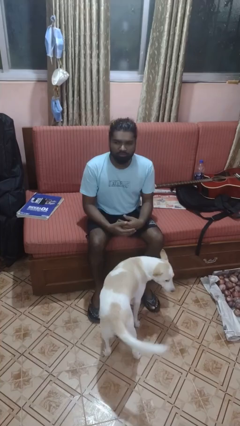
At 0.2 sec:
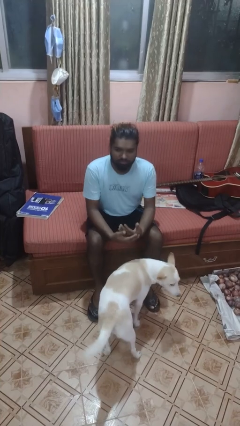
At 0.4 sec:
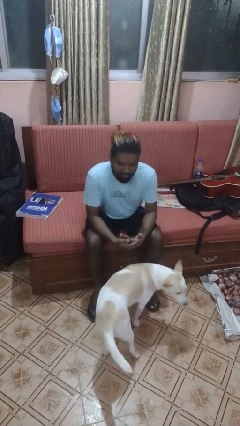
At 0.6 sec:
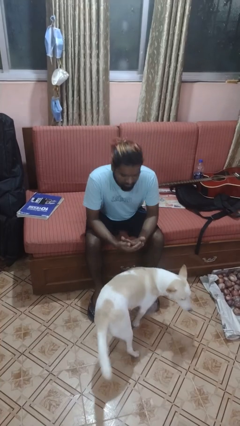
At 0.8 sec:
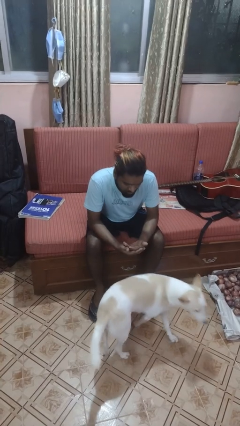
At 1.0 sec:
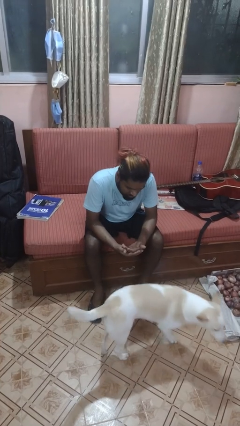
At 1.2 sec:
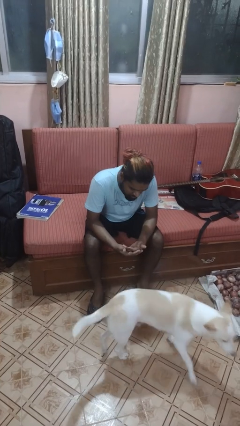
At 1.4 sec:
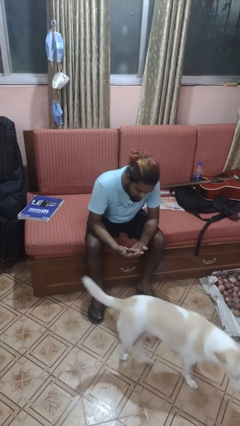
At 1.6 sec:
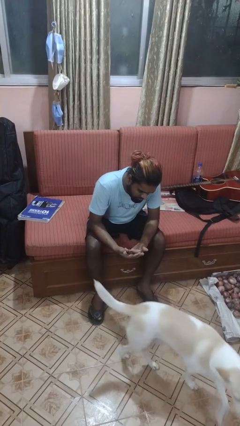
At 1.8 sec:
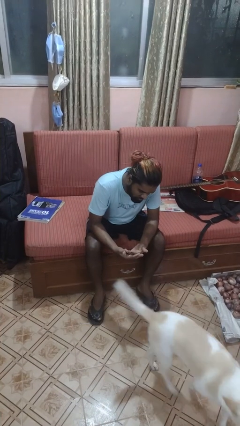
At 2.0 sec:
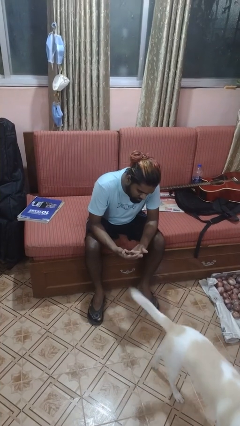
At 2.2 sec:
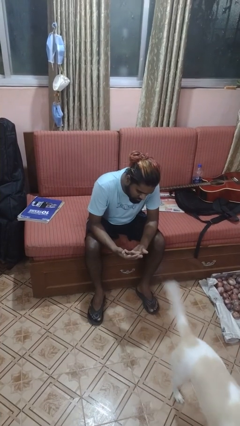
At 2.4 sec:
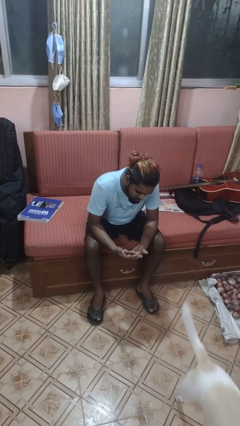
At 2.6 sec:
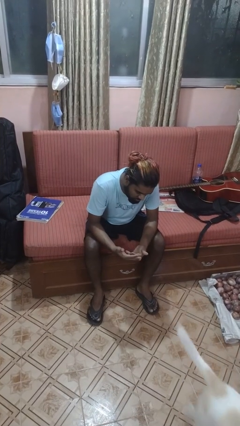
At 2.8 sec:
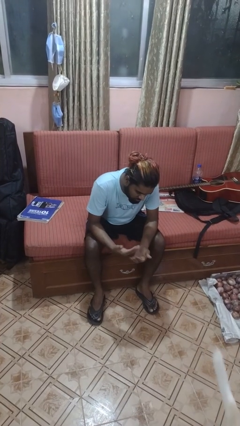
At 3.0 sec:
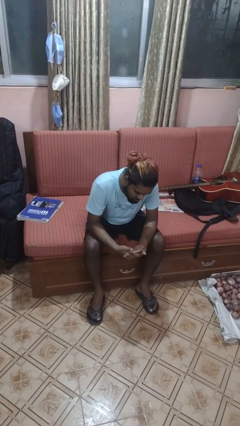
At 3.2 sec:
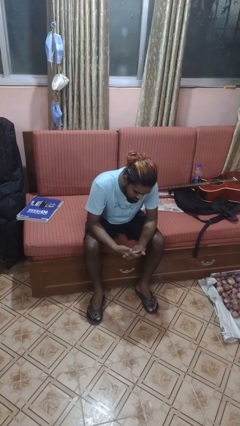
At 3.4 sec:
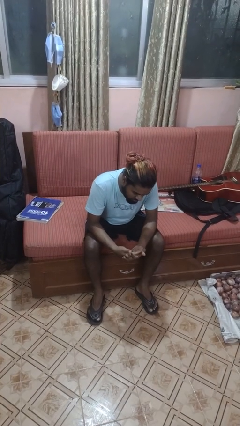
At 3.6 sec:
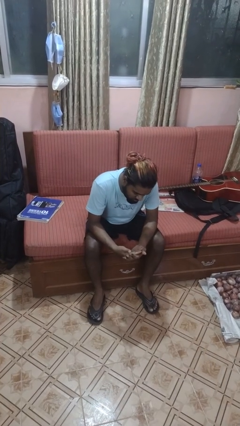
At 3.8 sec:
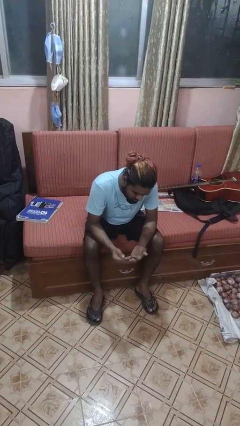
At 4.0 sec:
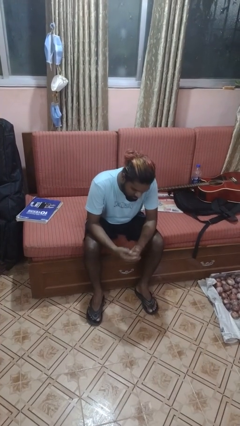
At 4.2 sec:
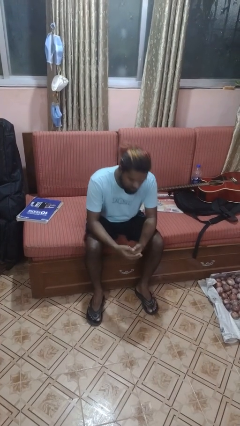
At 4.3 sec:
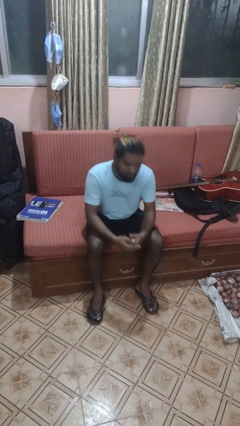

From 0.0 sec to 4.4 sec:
person looks at hands in lap

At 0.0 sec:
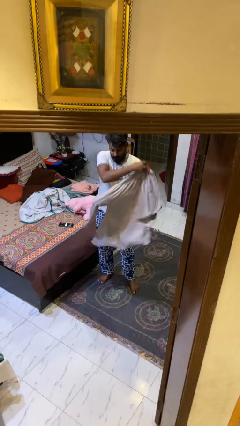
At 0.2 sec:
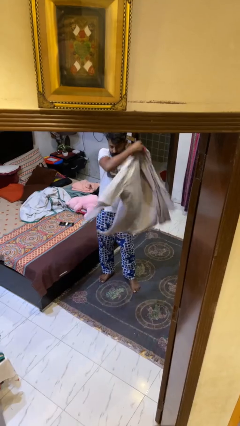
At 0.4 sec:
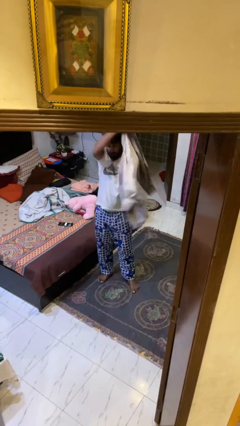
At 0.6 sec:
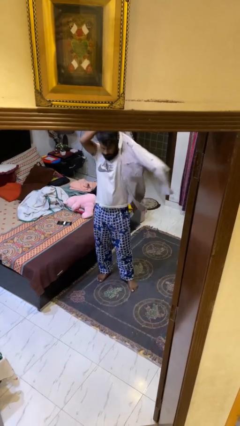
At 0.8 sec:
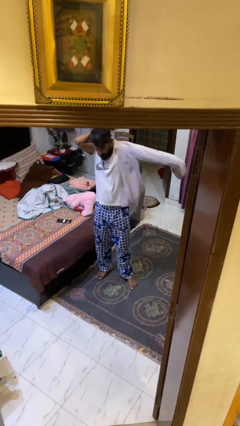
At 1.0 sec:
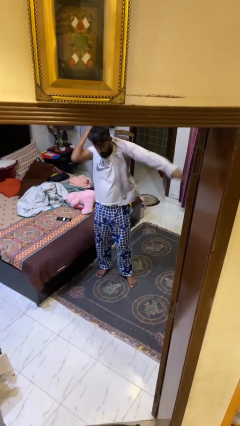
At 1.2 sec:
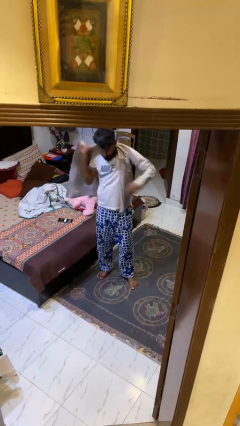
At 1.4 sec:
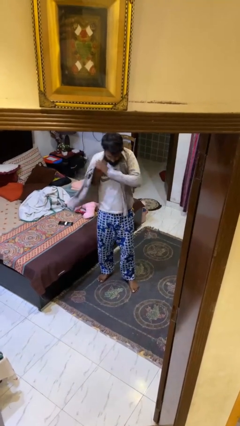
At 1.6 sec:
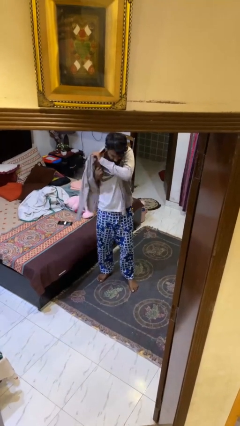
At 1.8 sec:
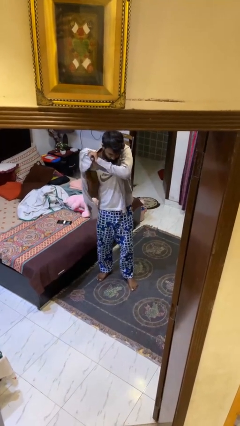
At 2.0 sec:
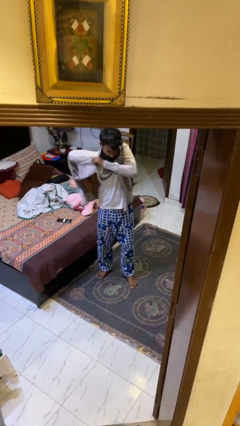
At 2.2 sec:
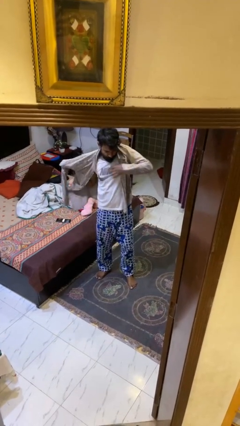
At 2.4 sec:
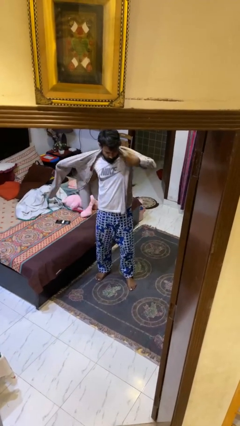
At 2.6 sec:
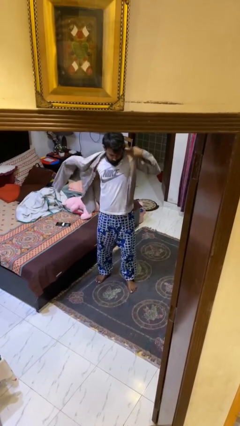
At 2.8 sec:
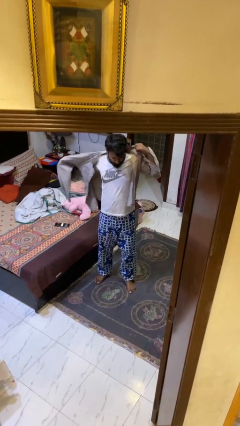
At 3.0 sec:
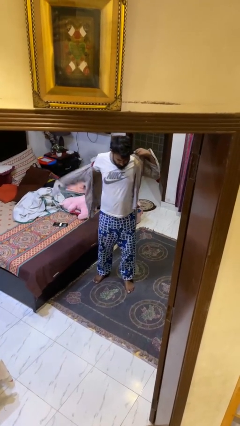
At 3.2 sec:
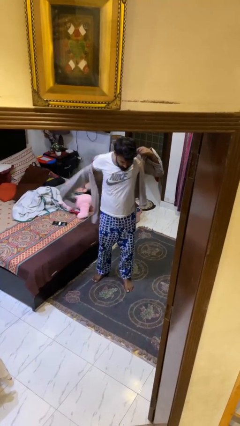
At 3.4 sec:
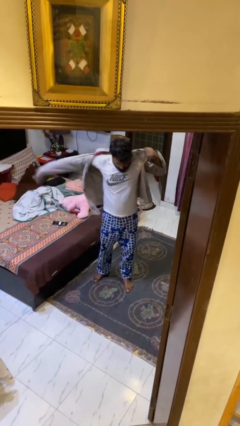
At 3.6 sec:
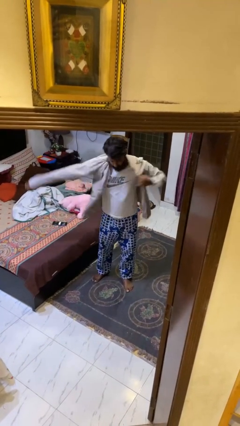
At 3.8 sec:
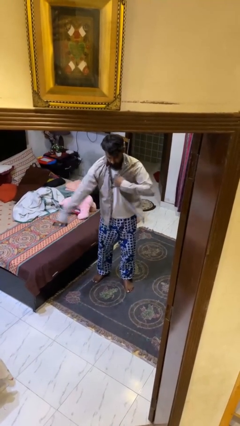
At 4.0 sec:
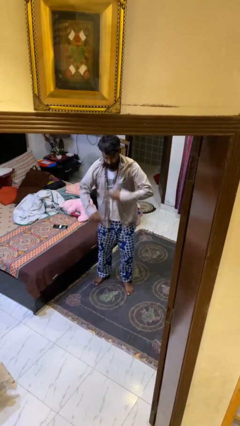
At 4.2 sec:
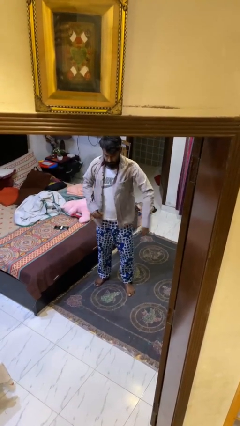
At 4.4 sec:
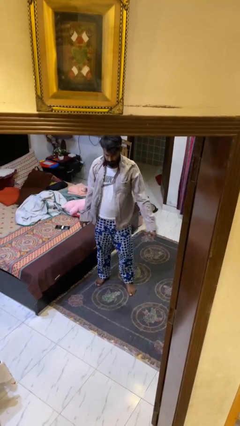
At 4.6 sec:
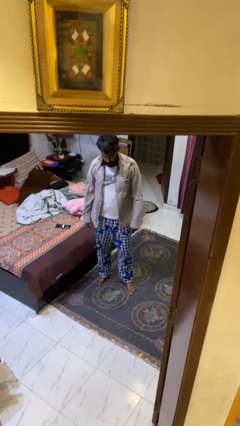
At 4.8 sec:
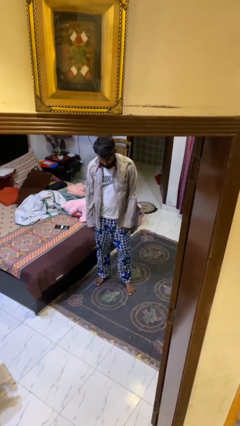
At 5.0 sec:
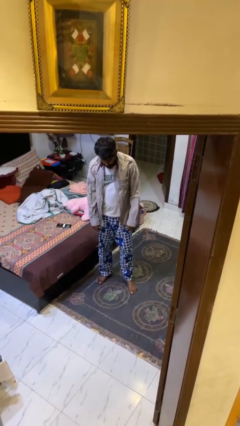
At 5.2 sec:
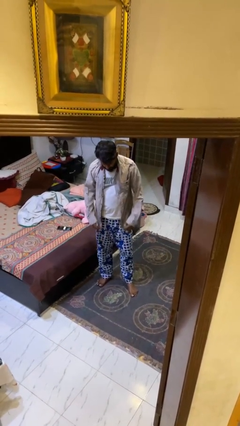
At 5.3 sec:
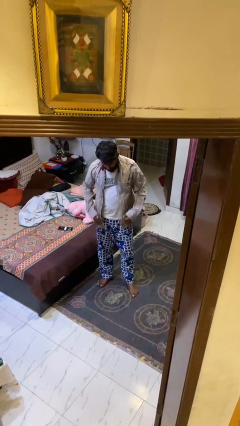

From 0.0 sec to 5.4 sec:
person puts on shirt

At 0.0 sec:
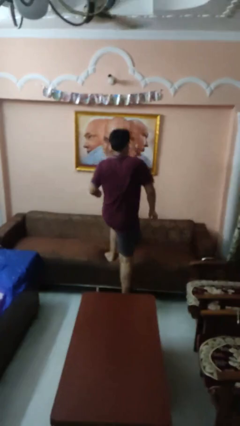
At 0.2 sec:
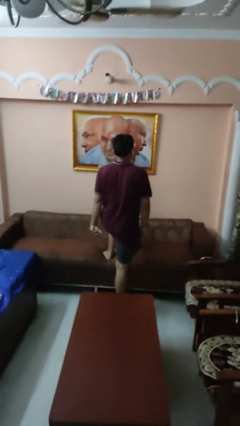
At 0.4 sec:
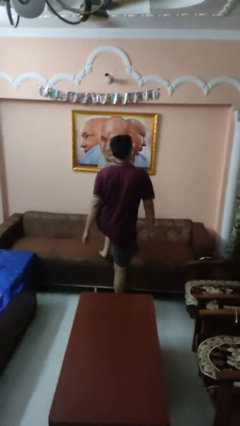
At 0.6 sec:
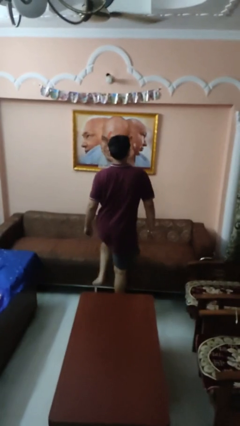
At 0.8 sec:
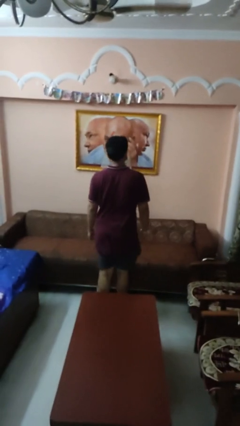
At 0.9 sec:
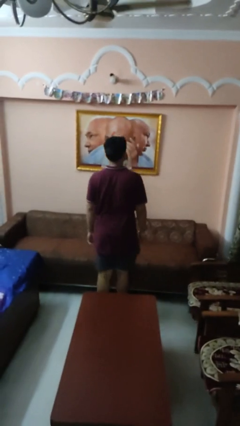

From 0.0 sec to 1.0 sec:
person climbs off couch

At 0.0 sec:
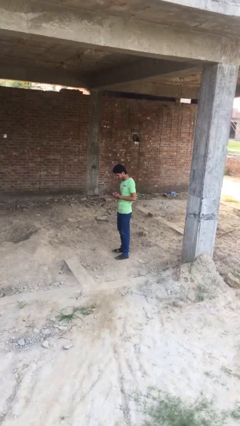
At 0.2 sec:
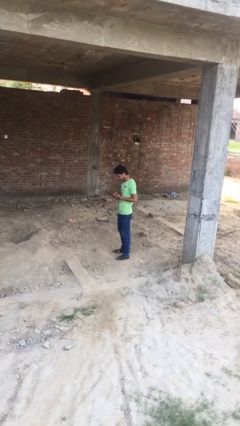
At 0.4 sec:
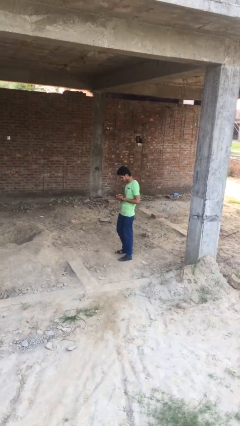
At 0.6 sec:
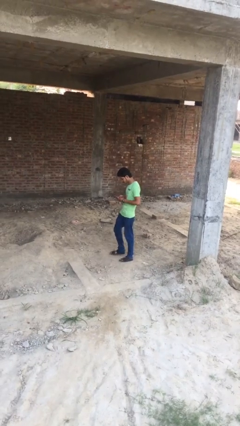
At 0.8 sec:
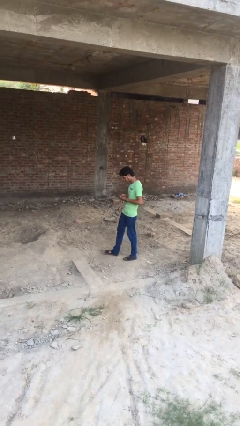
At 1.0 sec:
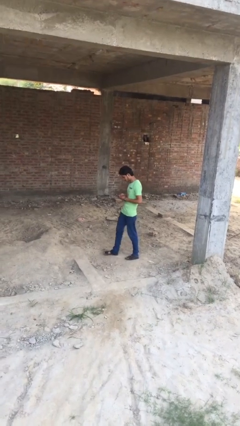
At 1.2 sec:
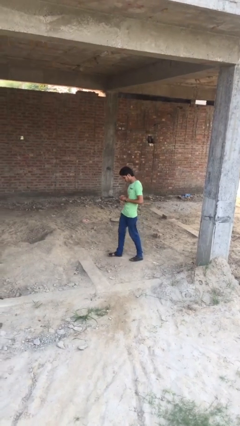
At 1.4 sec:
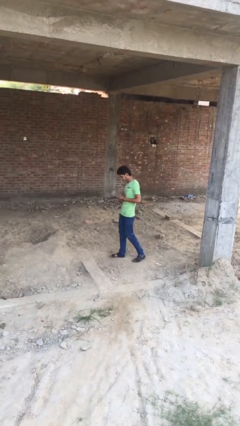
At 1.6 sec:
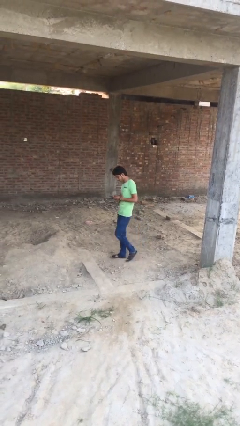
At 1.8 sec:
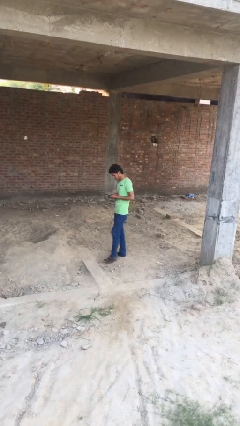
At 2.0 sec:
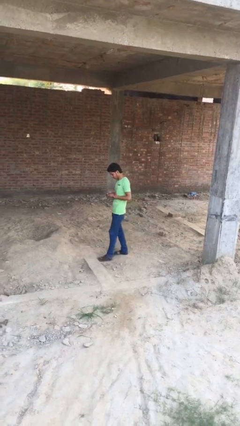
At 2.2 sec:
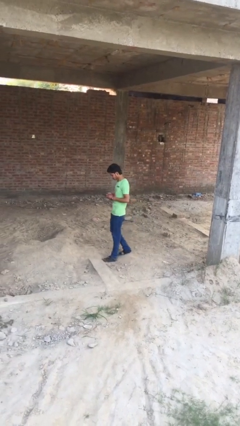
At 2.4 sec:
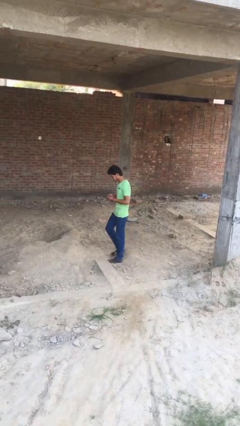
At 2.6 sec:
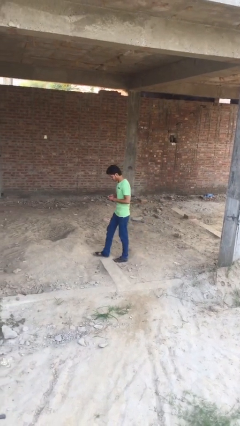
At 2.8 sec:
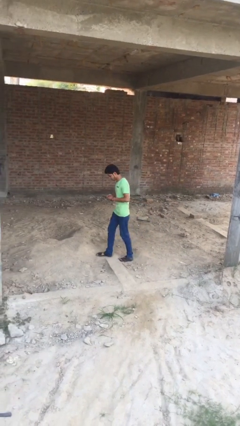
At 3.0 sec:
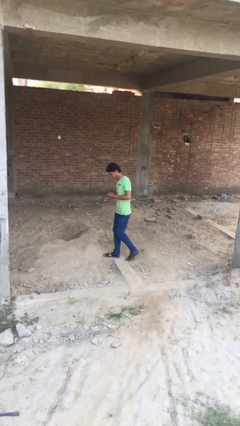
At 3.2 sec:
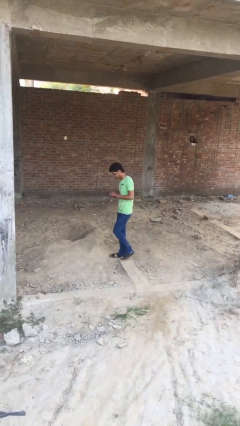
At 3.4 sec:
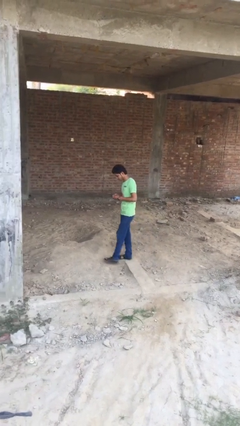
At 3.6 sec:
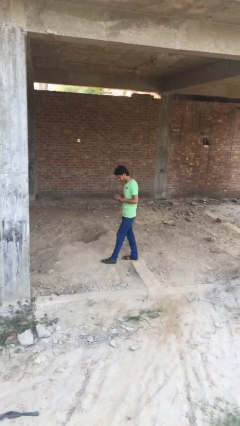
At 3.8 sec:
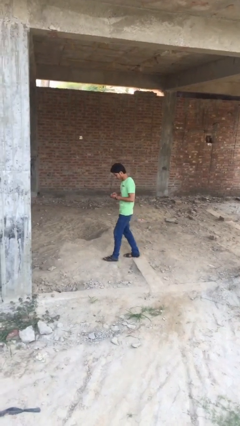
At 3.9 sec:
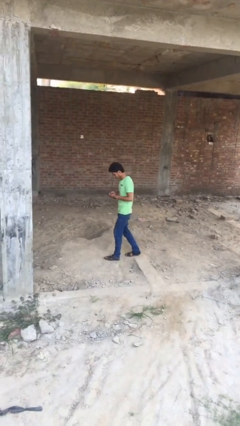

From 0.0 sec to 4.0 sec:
person texts on phone

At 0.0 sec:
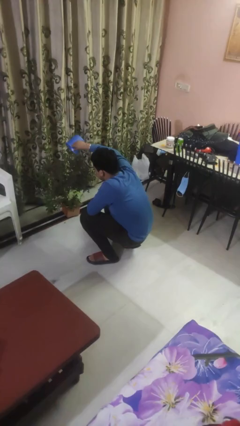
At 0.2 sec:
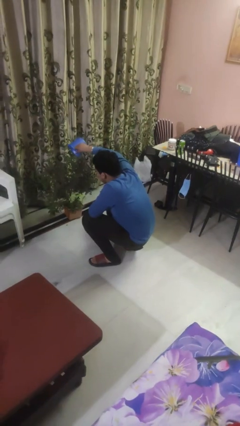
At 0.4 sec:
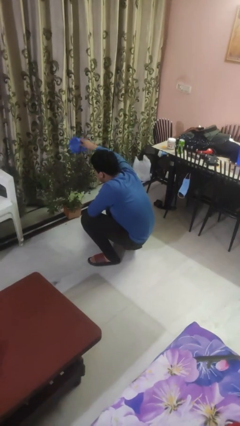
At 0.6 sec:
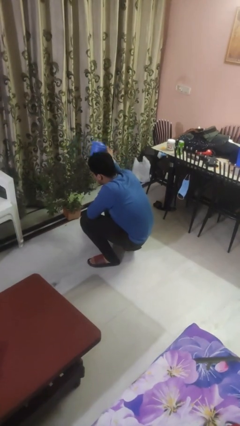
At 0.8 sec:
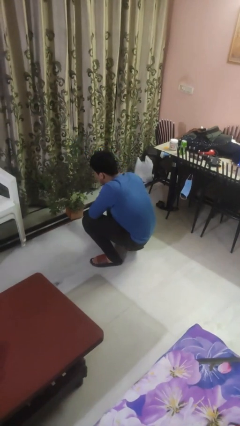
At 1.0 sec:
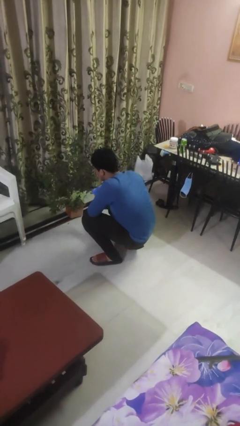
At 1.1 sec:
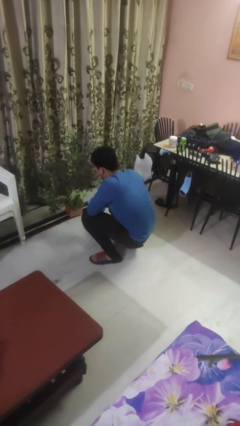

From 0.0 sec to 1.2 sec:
person waters houseplant

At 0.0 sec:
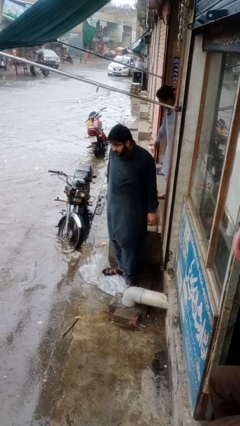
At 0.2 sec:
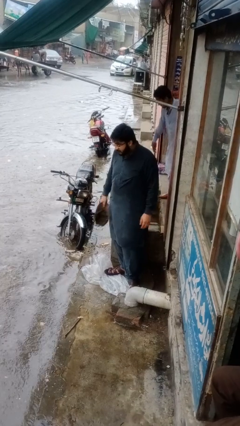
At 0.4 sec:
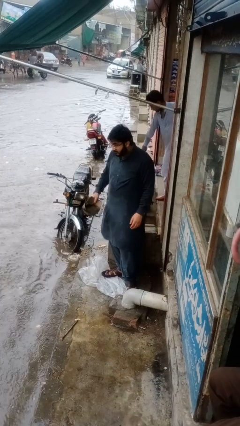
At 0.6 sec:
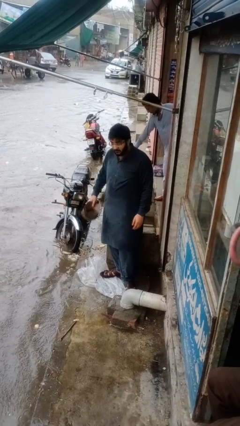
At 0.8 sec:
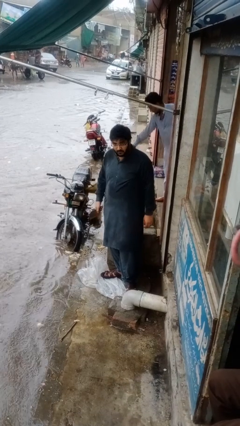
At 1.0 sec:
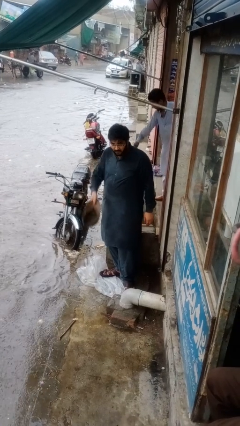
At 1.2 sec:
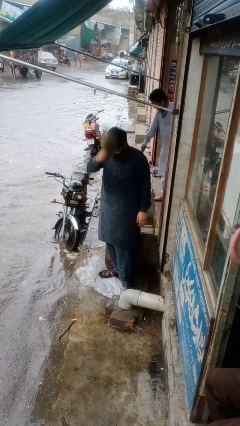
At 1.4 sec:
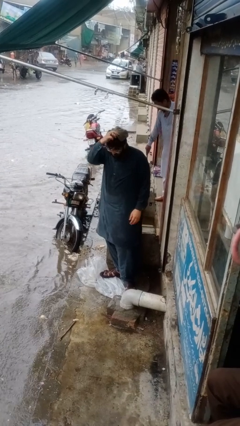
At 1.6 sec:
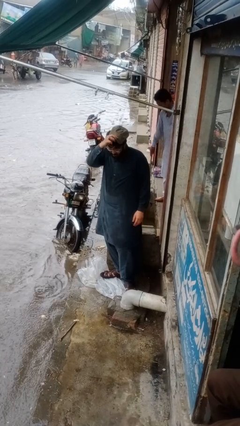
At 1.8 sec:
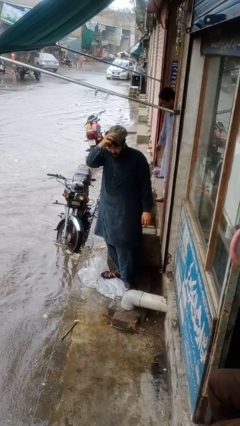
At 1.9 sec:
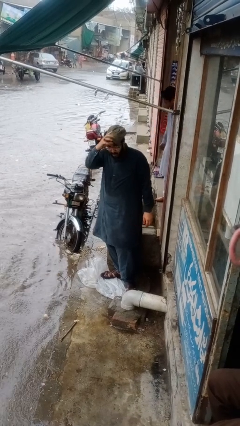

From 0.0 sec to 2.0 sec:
person puts on hat
